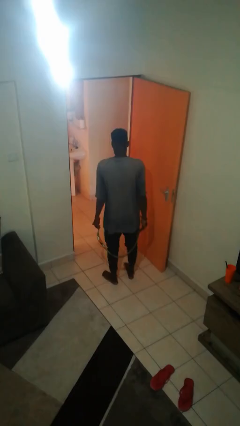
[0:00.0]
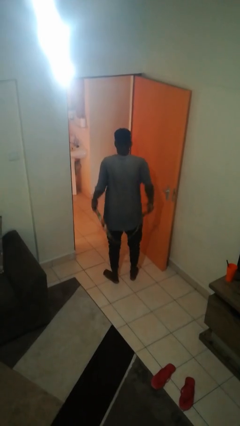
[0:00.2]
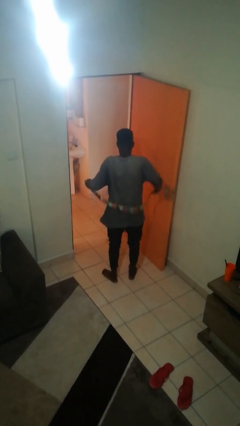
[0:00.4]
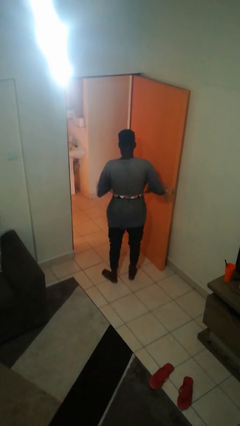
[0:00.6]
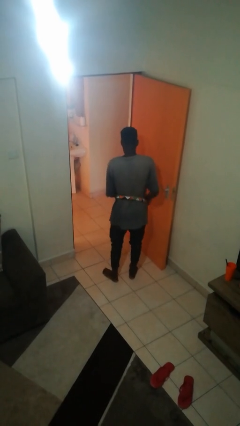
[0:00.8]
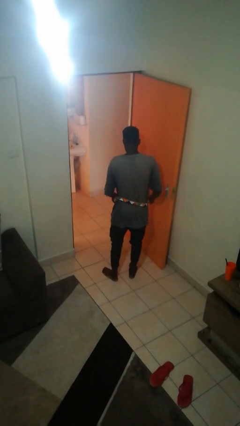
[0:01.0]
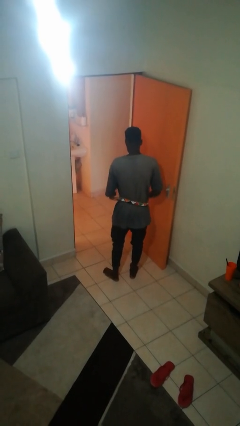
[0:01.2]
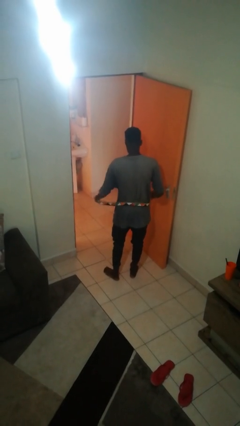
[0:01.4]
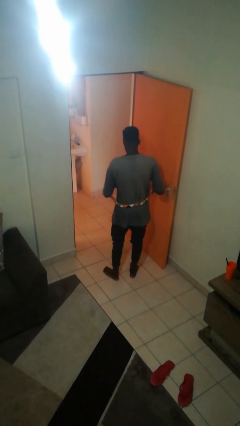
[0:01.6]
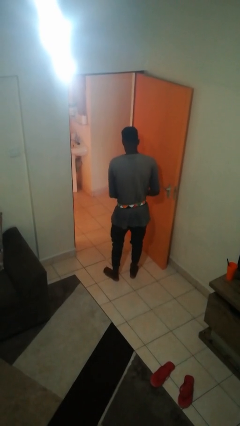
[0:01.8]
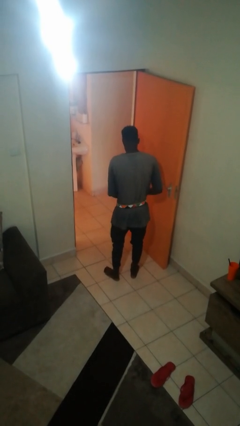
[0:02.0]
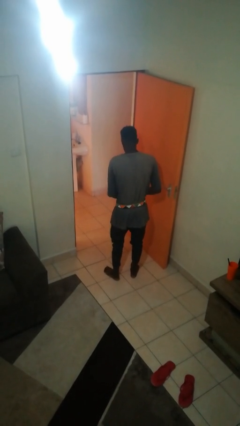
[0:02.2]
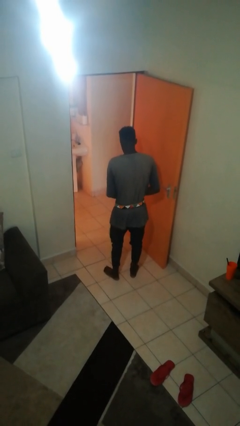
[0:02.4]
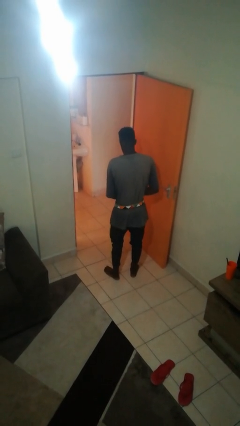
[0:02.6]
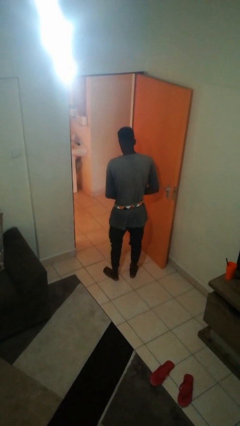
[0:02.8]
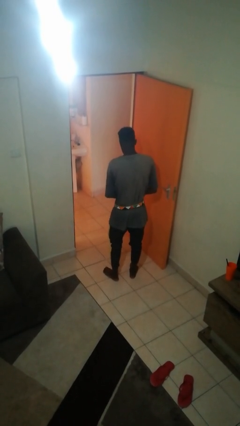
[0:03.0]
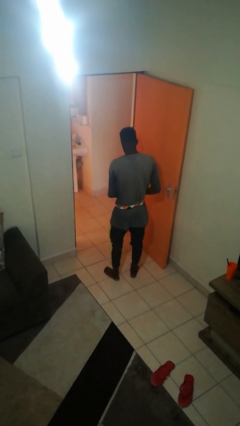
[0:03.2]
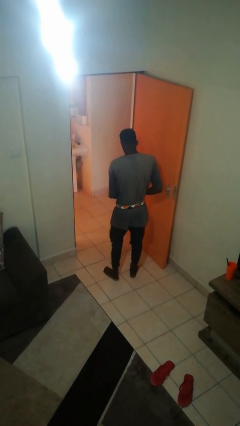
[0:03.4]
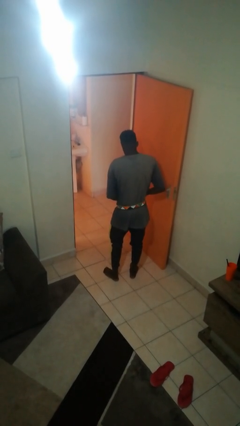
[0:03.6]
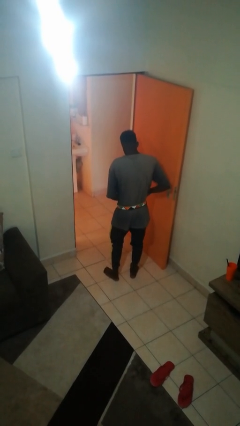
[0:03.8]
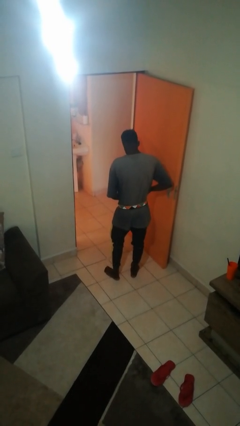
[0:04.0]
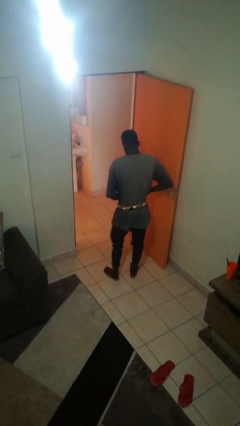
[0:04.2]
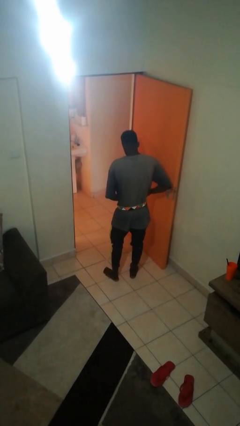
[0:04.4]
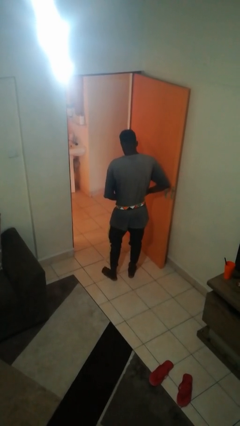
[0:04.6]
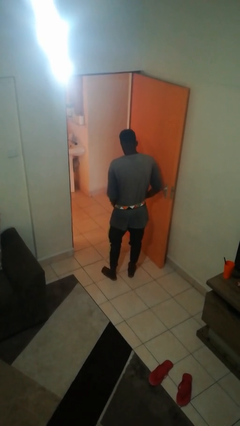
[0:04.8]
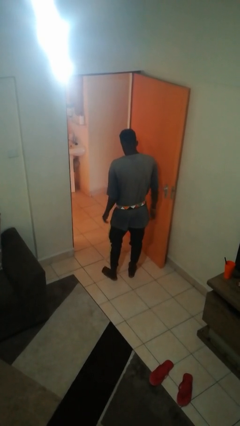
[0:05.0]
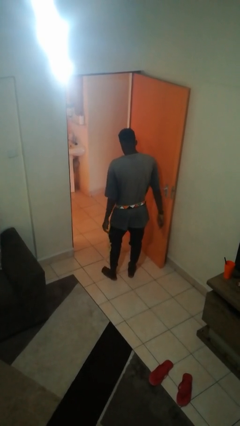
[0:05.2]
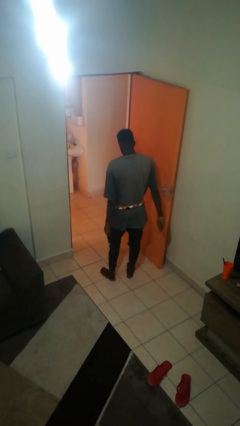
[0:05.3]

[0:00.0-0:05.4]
person puts on belt

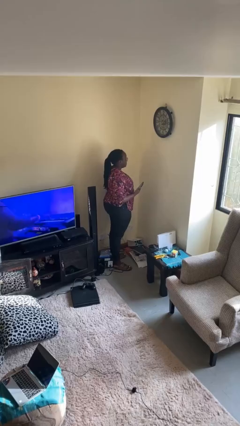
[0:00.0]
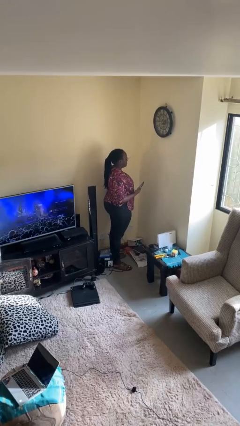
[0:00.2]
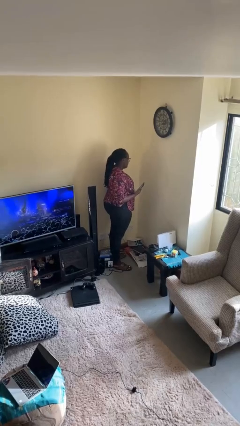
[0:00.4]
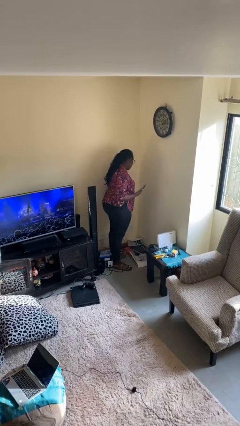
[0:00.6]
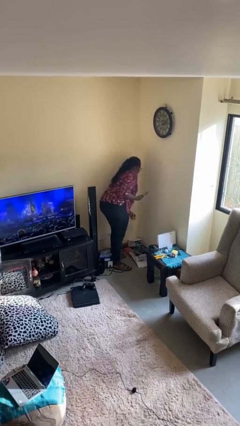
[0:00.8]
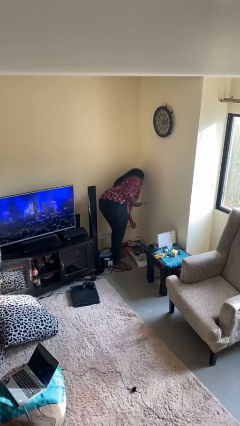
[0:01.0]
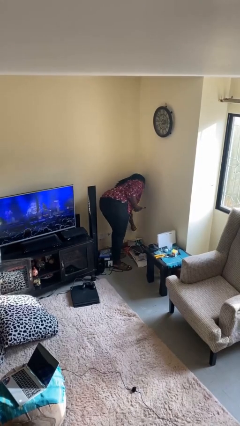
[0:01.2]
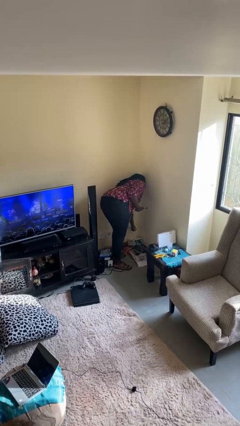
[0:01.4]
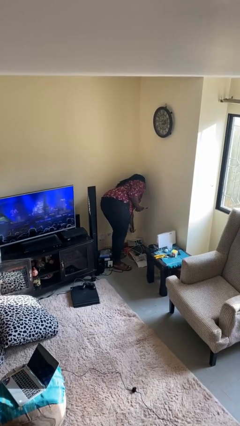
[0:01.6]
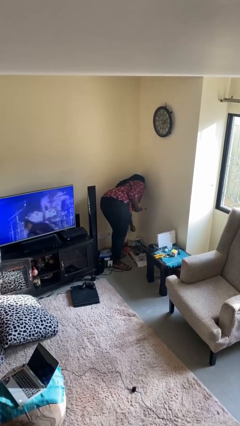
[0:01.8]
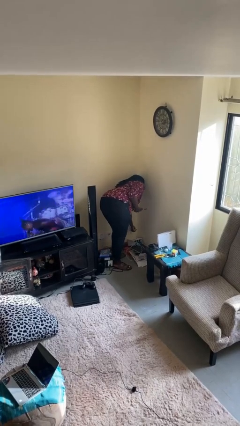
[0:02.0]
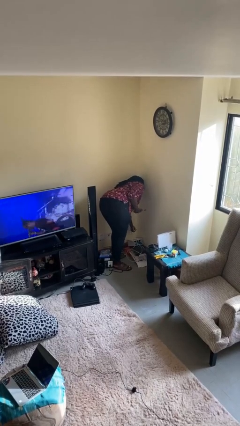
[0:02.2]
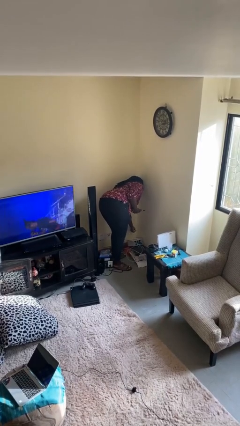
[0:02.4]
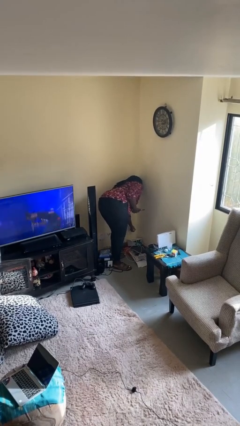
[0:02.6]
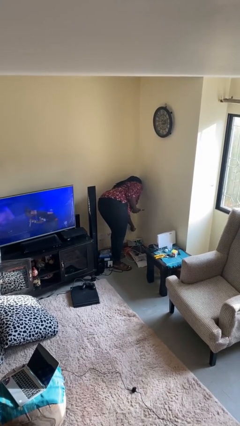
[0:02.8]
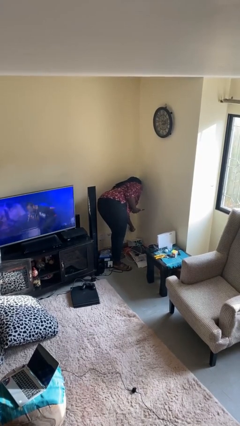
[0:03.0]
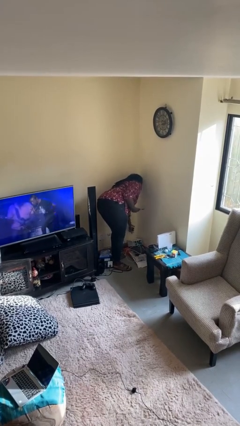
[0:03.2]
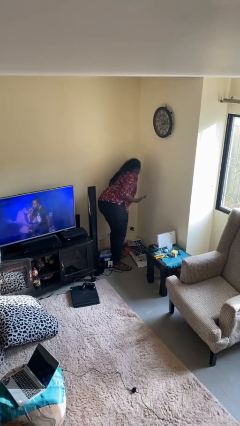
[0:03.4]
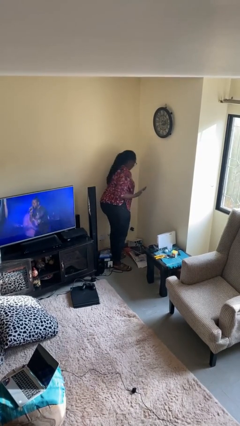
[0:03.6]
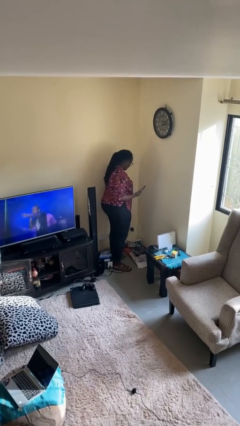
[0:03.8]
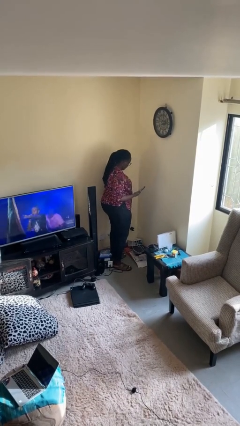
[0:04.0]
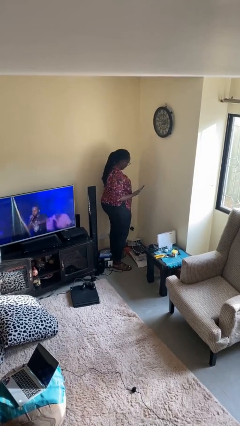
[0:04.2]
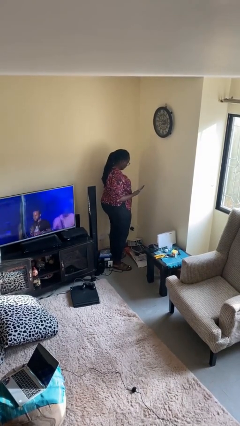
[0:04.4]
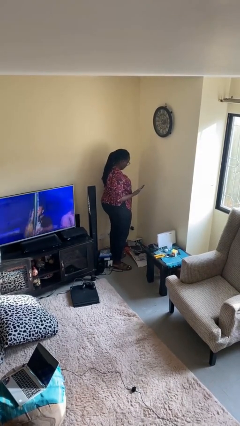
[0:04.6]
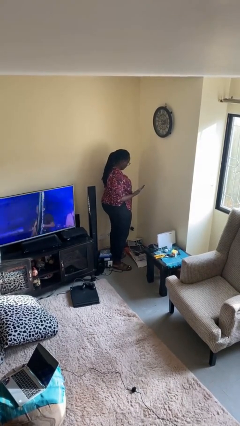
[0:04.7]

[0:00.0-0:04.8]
person plugs into electrical socket

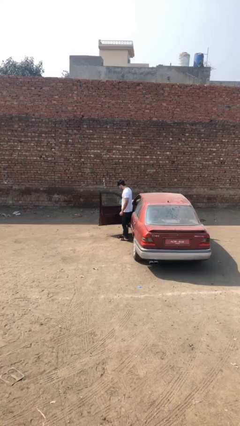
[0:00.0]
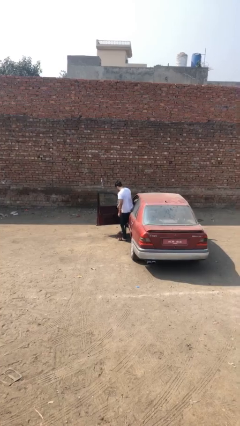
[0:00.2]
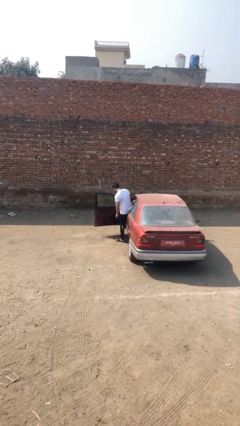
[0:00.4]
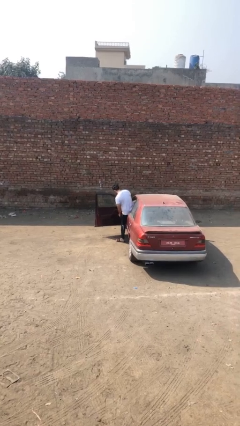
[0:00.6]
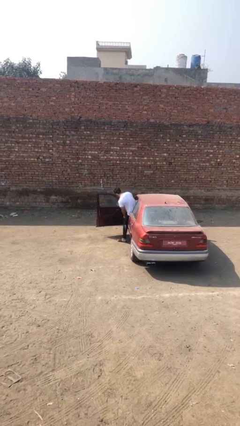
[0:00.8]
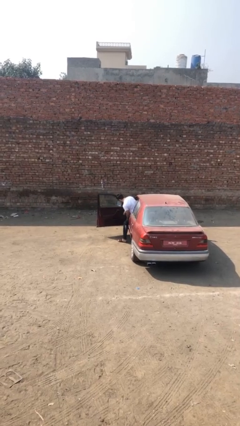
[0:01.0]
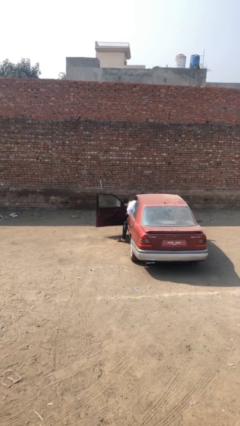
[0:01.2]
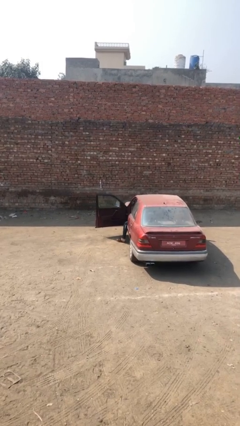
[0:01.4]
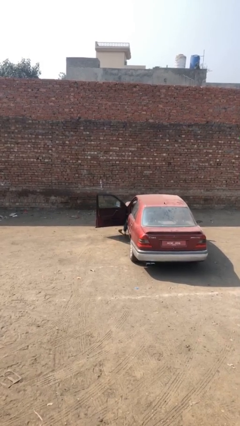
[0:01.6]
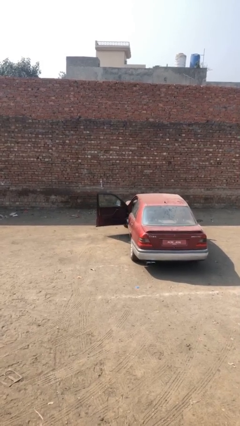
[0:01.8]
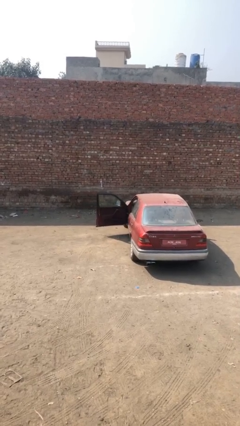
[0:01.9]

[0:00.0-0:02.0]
person enters car

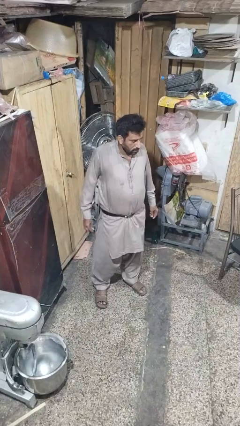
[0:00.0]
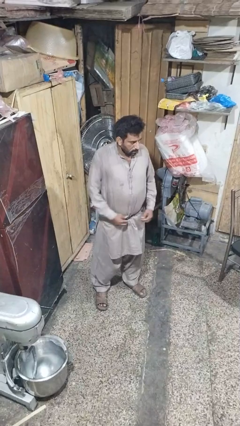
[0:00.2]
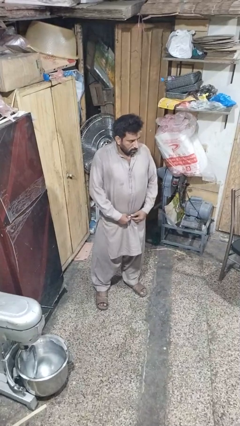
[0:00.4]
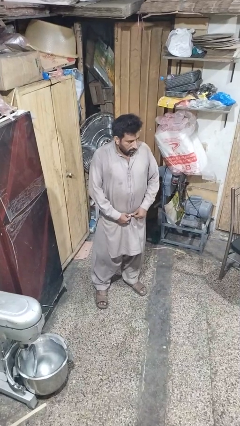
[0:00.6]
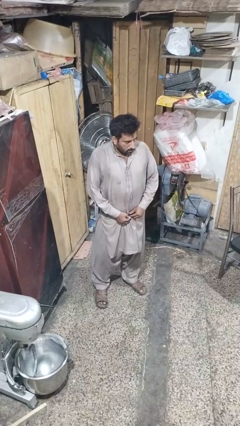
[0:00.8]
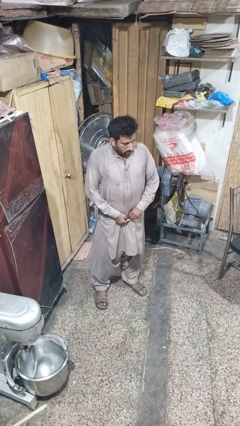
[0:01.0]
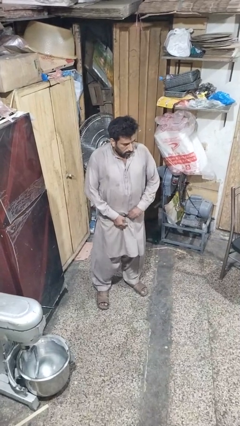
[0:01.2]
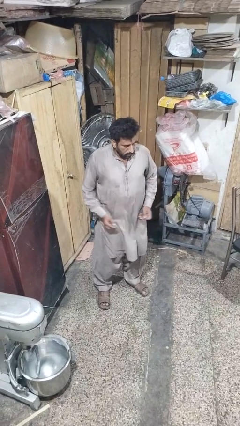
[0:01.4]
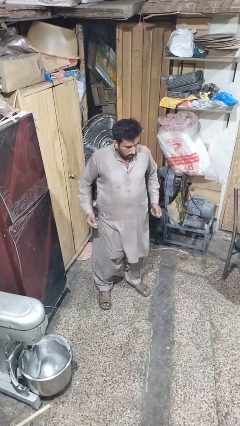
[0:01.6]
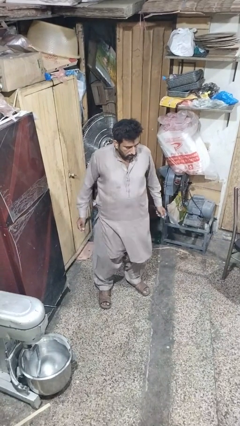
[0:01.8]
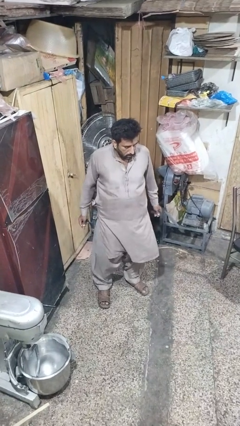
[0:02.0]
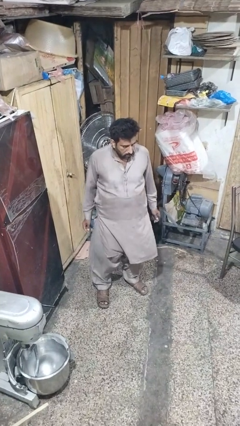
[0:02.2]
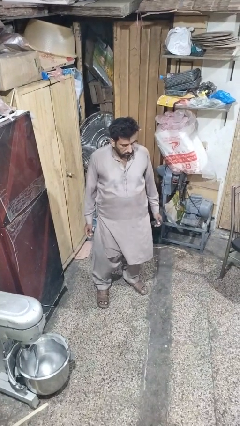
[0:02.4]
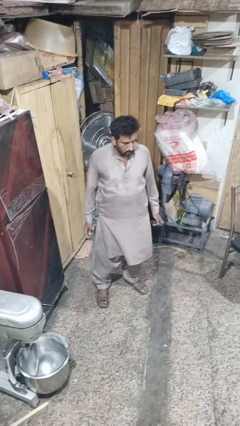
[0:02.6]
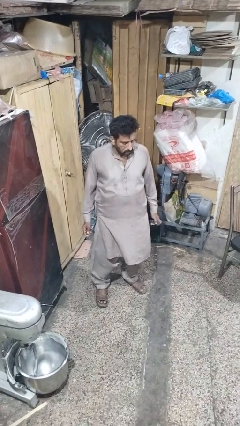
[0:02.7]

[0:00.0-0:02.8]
person takes off belt

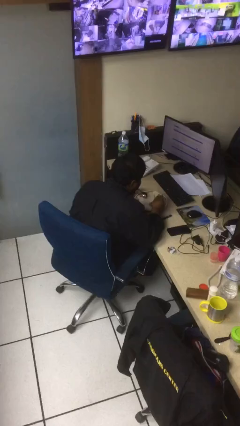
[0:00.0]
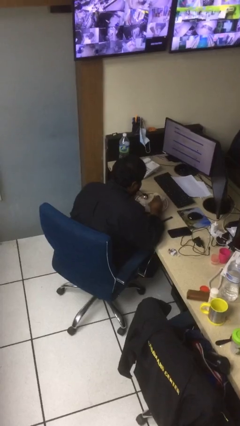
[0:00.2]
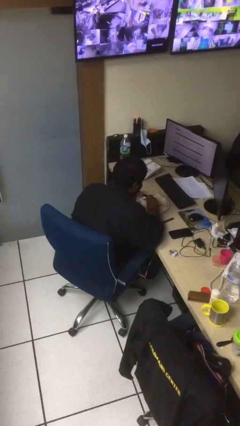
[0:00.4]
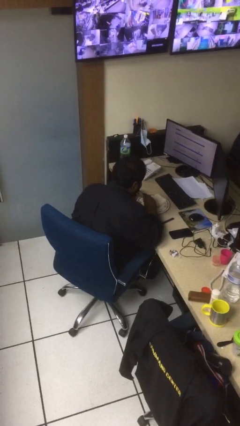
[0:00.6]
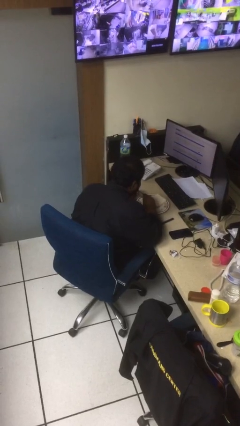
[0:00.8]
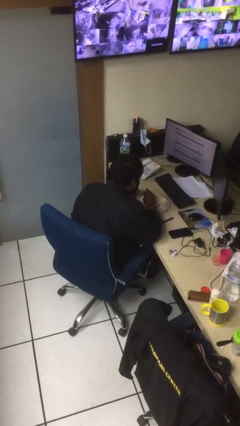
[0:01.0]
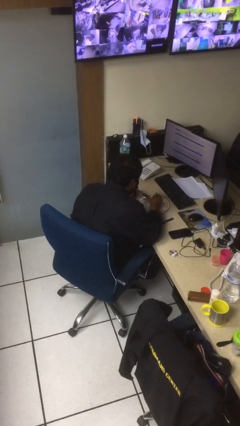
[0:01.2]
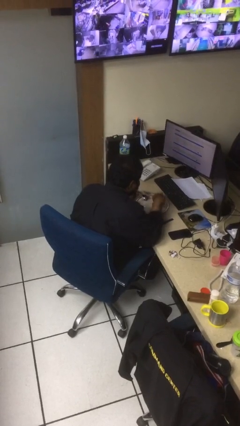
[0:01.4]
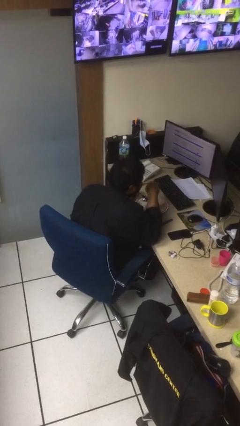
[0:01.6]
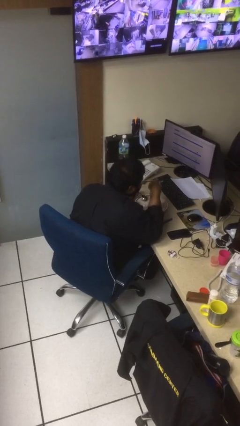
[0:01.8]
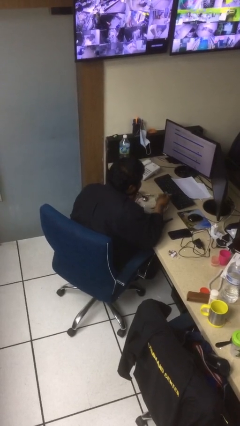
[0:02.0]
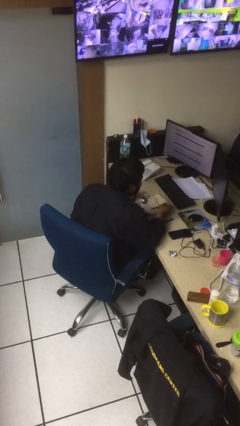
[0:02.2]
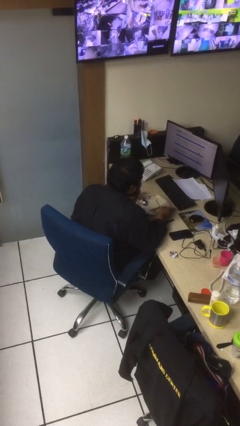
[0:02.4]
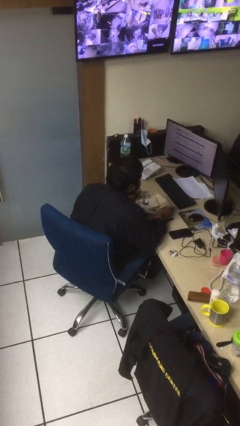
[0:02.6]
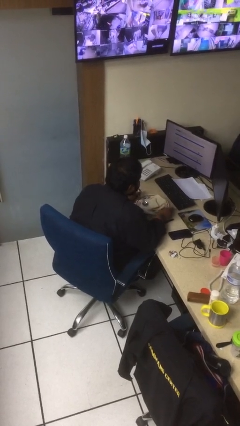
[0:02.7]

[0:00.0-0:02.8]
person eats with utensil
